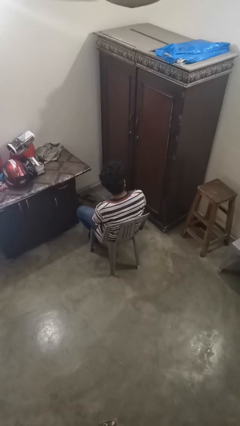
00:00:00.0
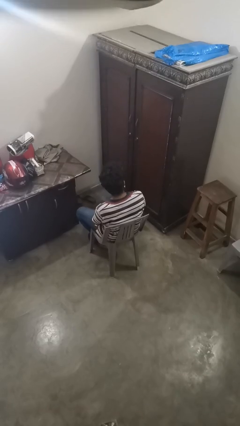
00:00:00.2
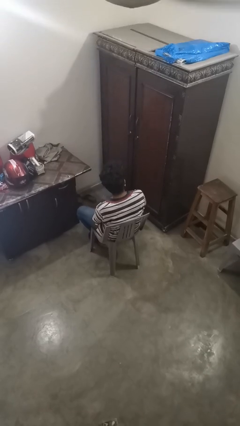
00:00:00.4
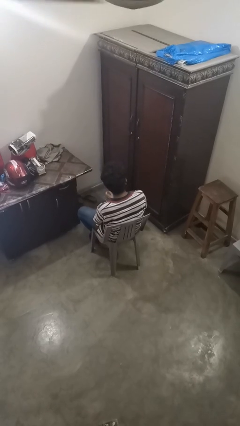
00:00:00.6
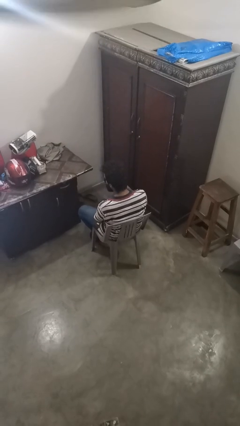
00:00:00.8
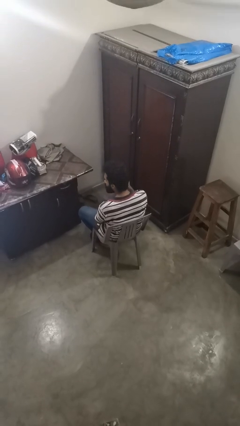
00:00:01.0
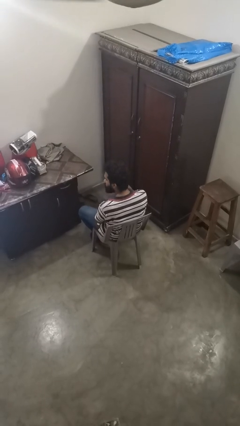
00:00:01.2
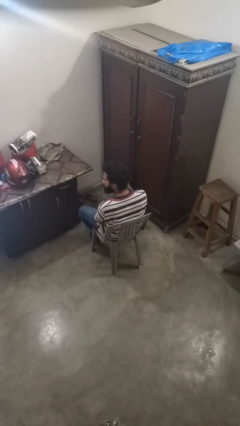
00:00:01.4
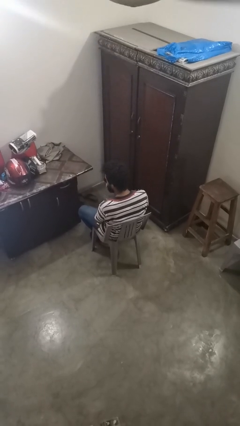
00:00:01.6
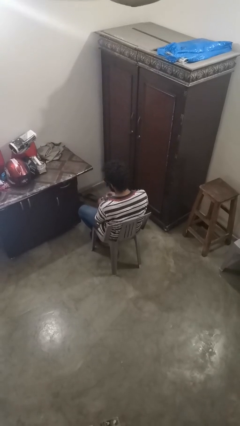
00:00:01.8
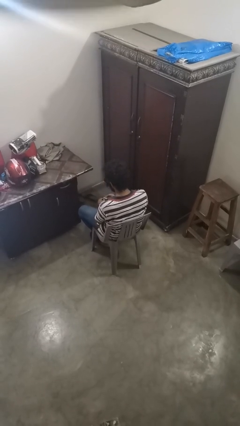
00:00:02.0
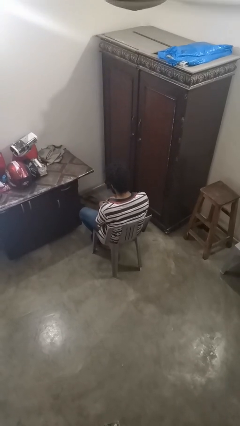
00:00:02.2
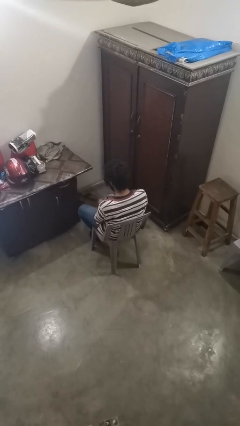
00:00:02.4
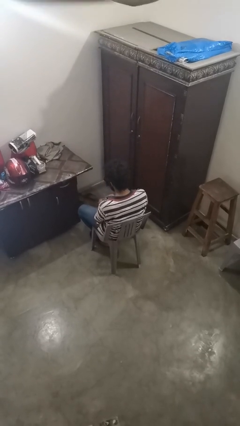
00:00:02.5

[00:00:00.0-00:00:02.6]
person takes off earrings

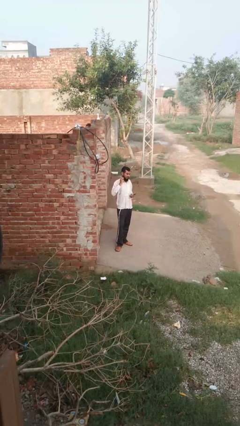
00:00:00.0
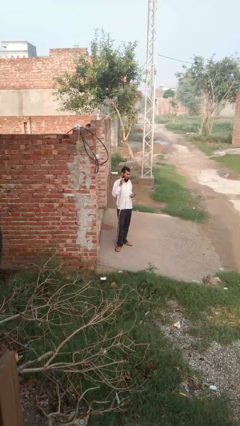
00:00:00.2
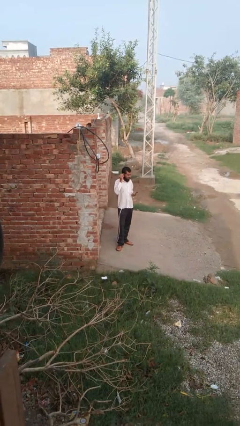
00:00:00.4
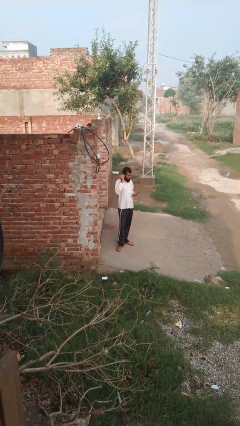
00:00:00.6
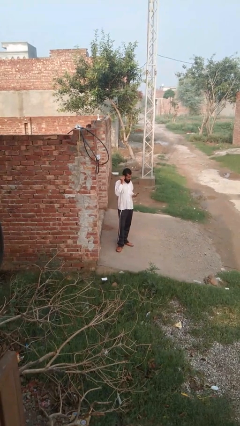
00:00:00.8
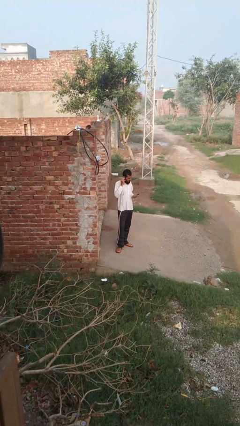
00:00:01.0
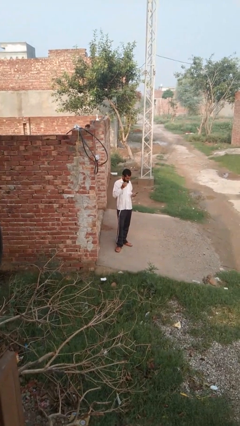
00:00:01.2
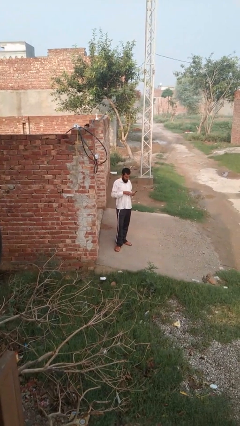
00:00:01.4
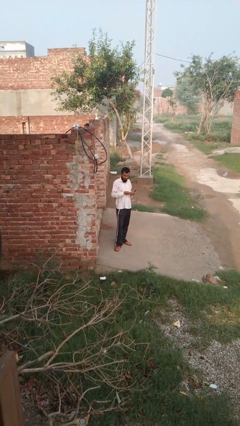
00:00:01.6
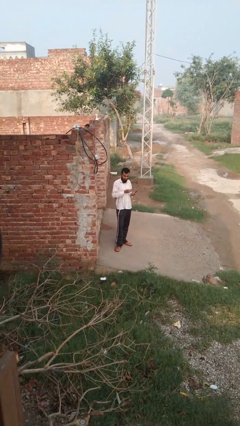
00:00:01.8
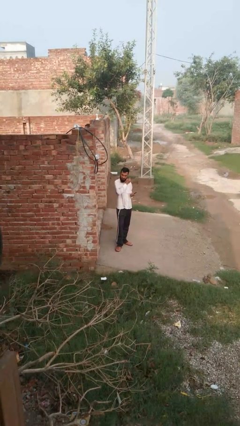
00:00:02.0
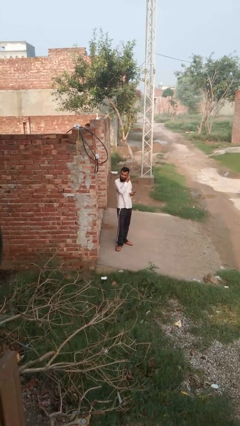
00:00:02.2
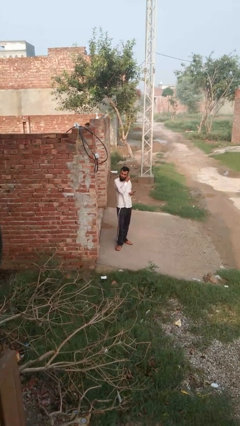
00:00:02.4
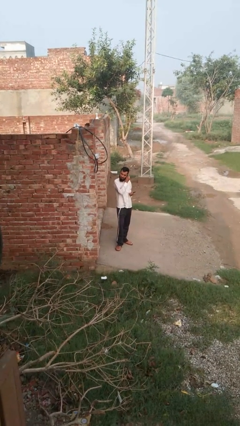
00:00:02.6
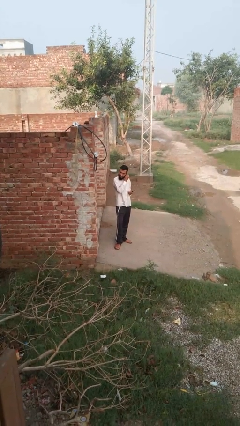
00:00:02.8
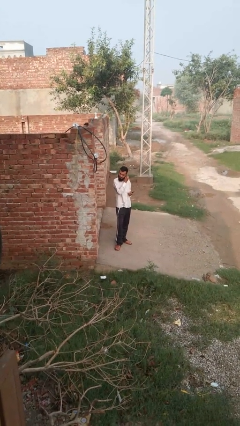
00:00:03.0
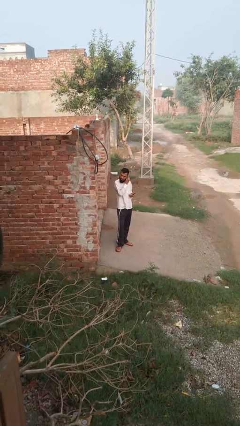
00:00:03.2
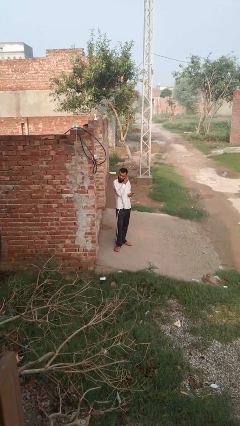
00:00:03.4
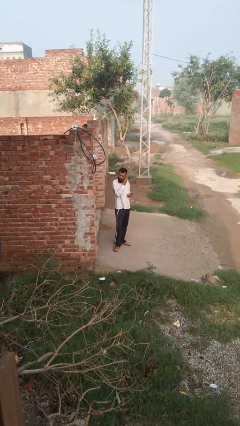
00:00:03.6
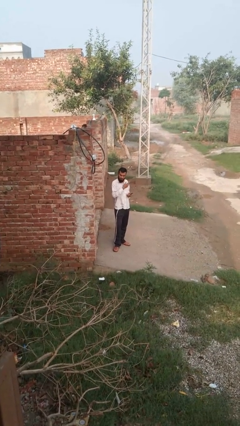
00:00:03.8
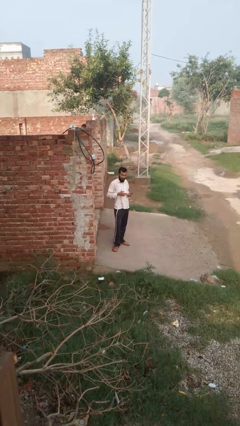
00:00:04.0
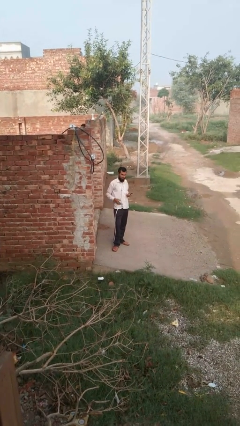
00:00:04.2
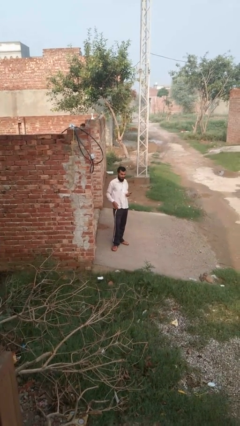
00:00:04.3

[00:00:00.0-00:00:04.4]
person puts on headphones

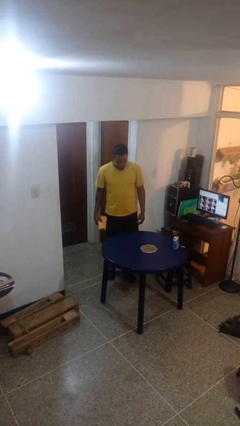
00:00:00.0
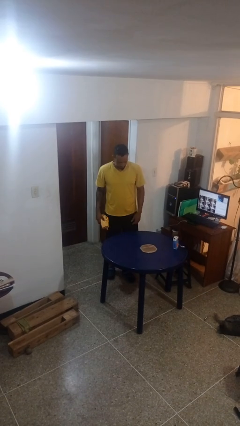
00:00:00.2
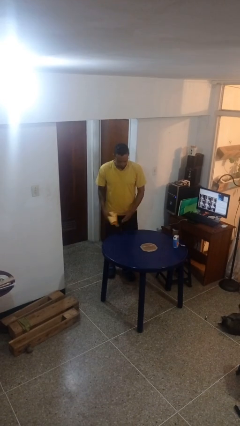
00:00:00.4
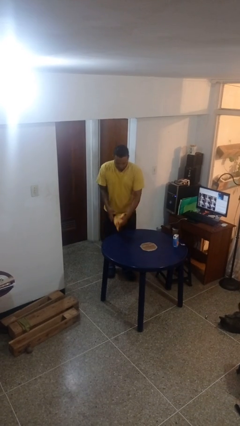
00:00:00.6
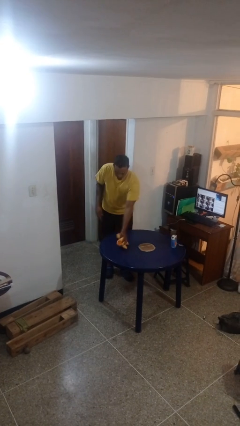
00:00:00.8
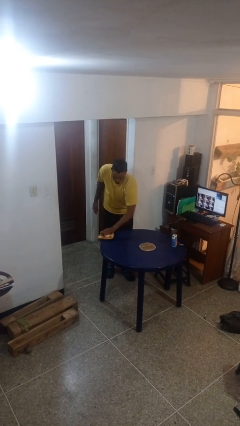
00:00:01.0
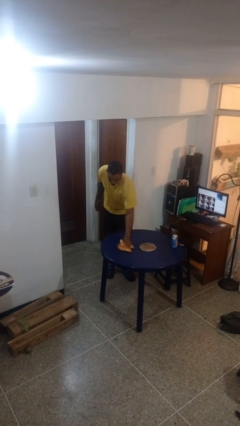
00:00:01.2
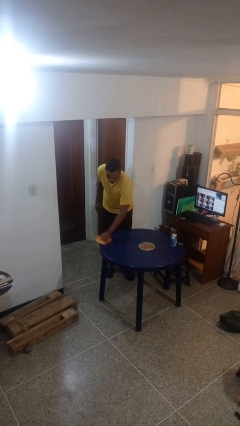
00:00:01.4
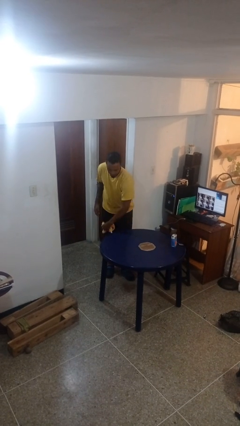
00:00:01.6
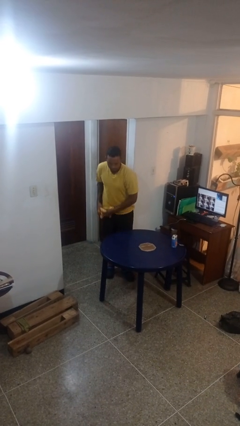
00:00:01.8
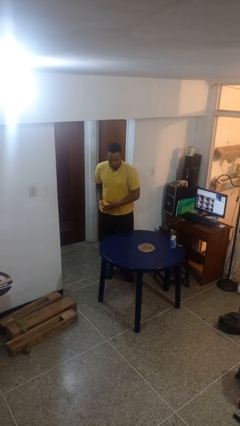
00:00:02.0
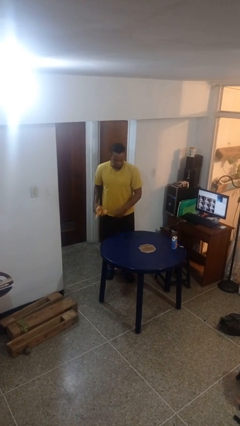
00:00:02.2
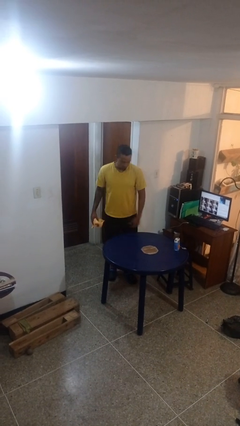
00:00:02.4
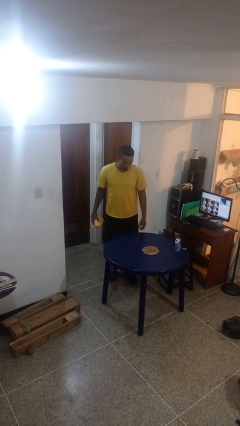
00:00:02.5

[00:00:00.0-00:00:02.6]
person cleans table with rag

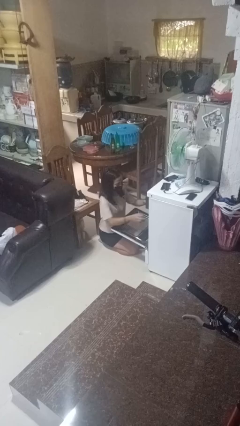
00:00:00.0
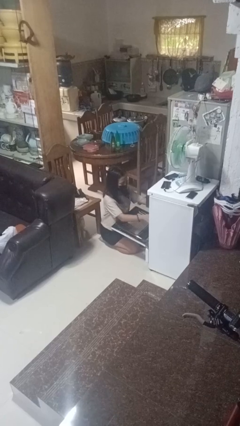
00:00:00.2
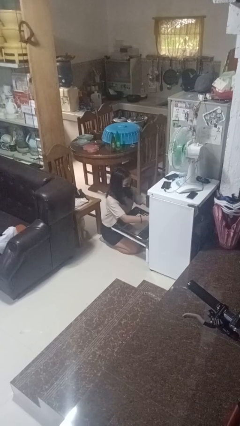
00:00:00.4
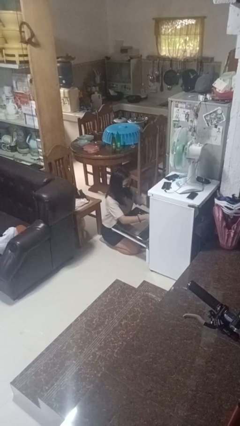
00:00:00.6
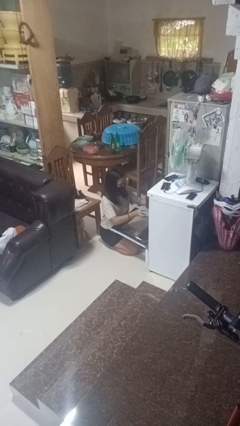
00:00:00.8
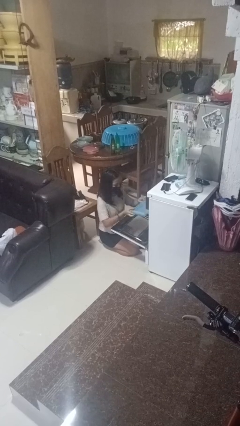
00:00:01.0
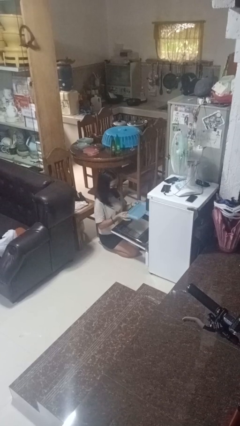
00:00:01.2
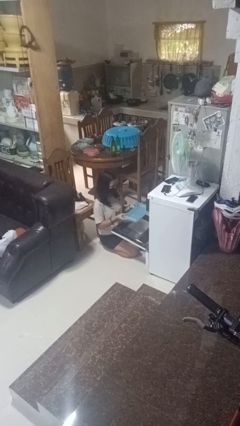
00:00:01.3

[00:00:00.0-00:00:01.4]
person takes object from oven

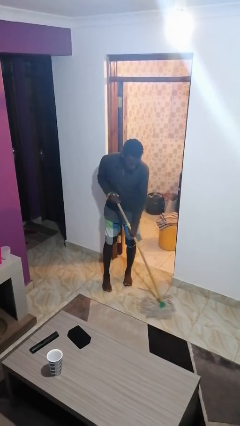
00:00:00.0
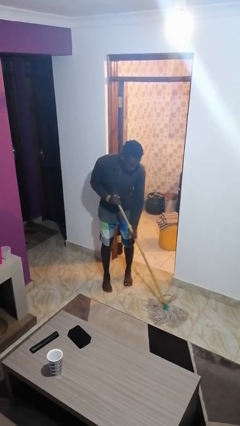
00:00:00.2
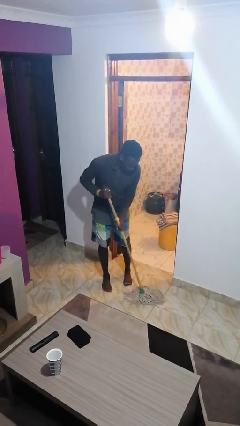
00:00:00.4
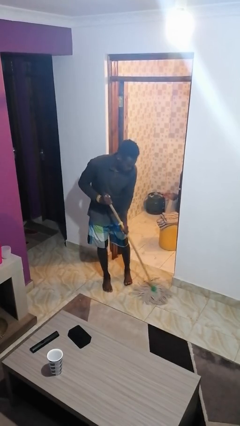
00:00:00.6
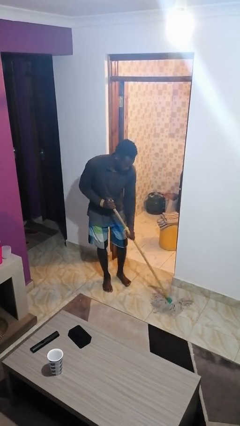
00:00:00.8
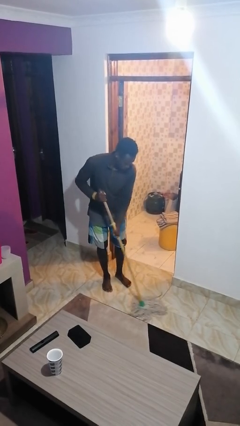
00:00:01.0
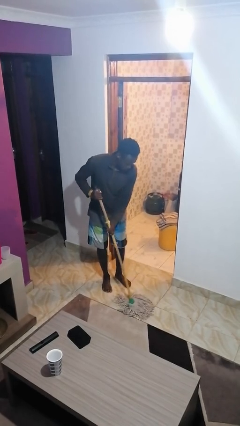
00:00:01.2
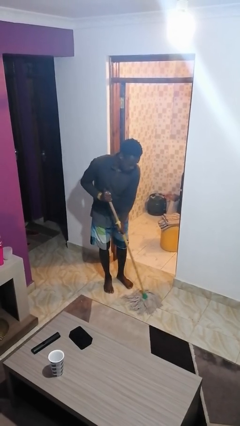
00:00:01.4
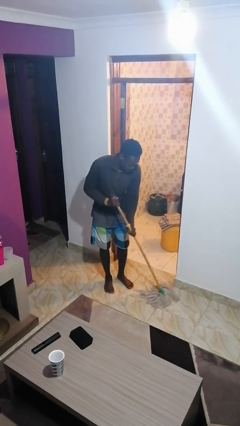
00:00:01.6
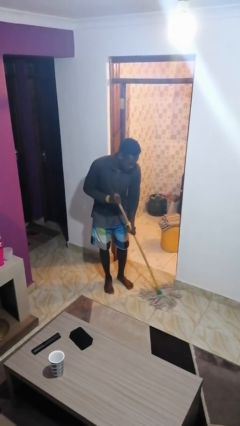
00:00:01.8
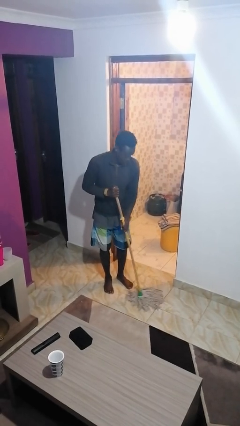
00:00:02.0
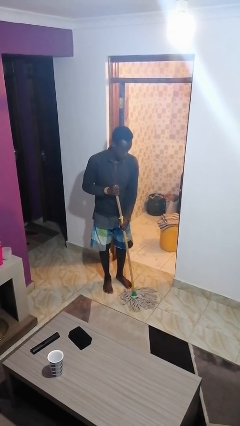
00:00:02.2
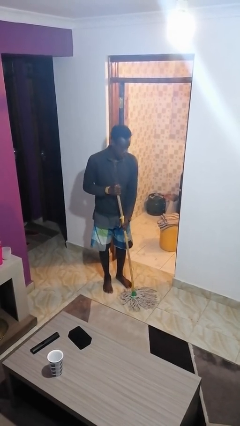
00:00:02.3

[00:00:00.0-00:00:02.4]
person mops

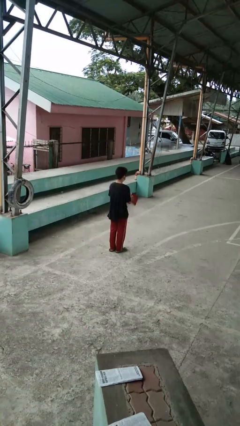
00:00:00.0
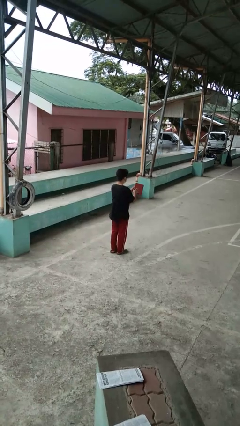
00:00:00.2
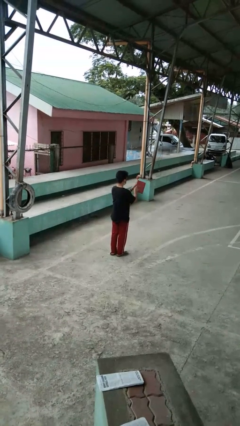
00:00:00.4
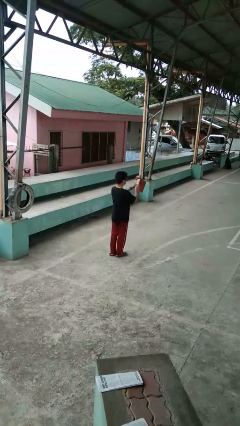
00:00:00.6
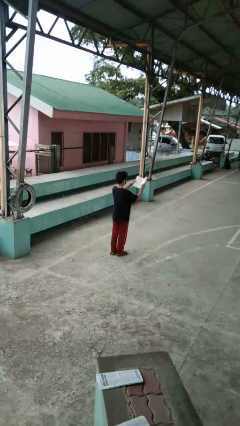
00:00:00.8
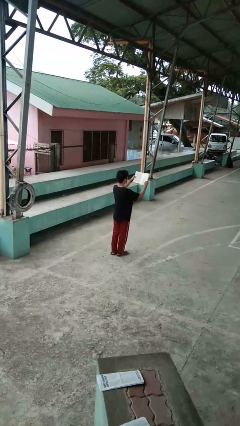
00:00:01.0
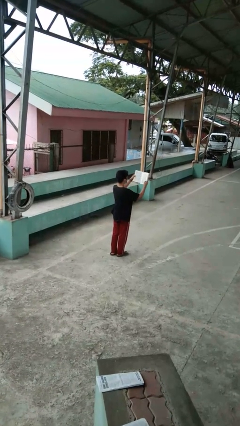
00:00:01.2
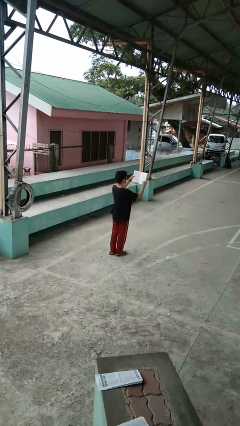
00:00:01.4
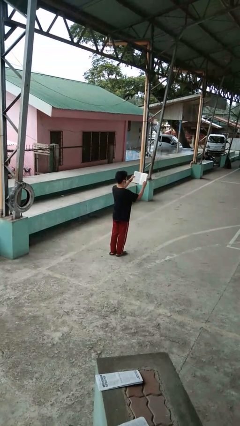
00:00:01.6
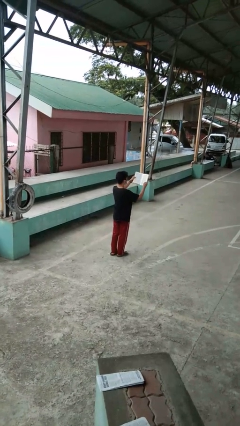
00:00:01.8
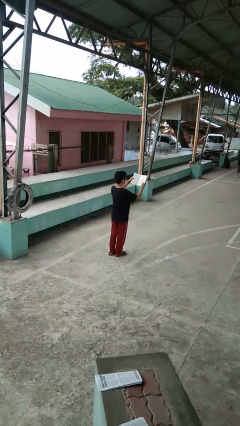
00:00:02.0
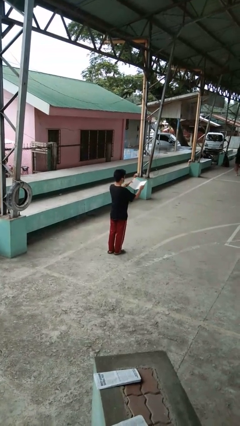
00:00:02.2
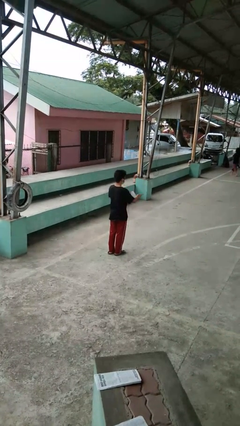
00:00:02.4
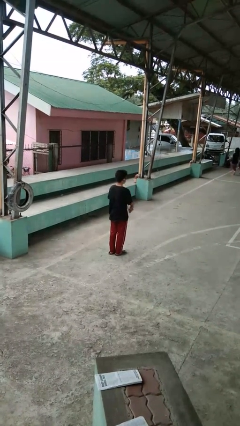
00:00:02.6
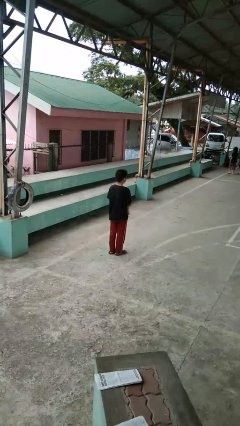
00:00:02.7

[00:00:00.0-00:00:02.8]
person reads book

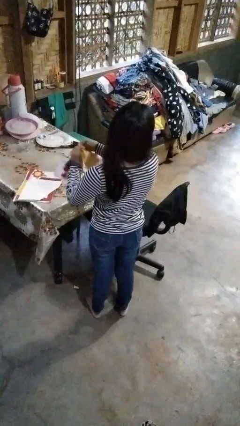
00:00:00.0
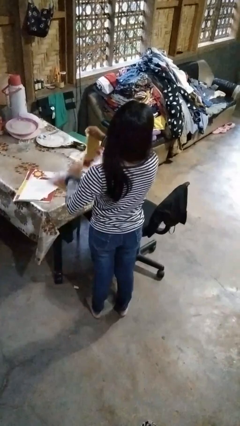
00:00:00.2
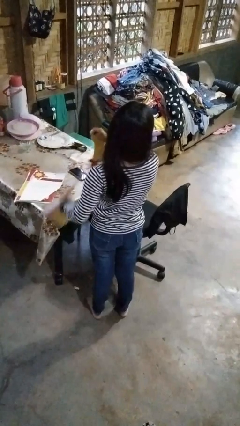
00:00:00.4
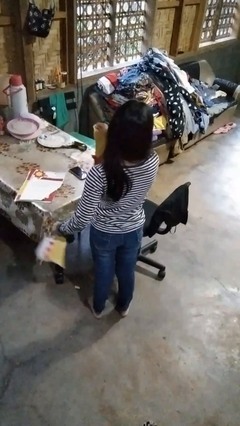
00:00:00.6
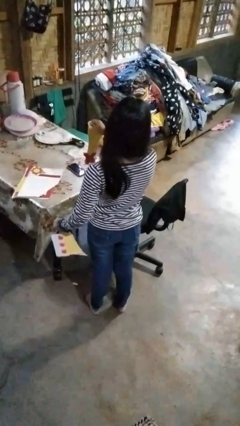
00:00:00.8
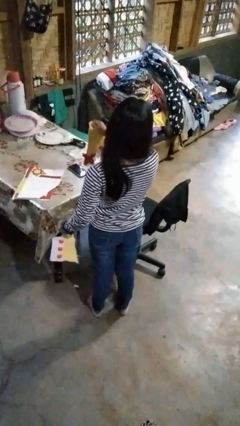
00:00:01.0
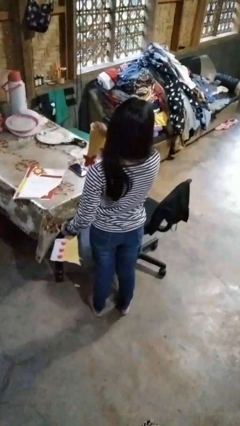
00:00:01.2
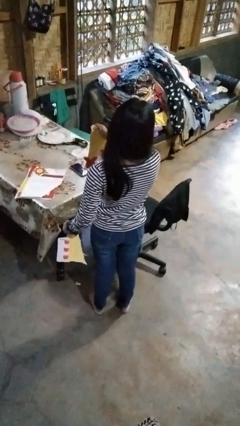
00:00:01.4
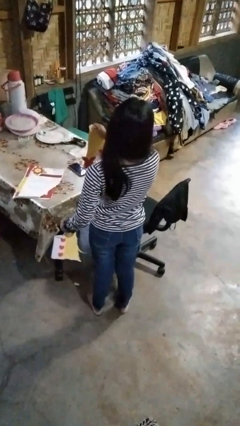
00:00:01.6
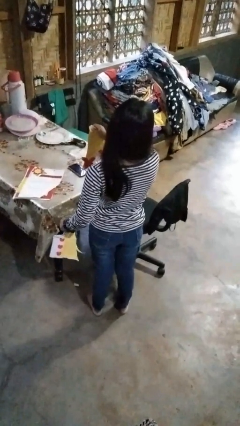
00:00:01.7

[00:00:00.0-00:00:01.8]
person tears paper
